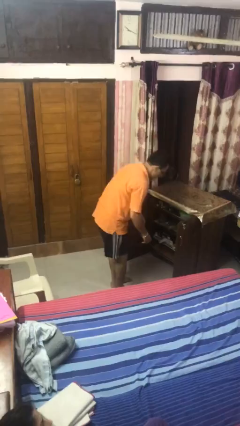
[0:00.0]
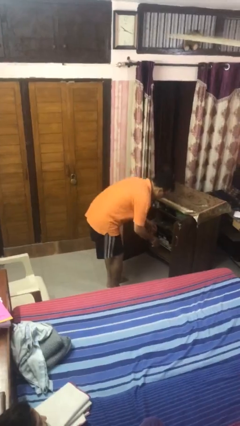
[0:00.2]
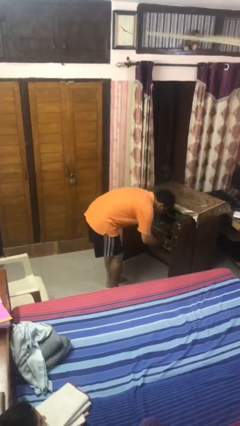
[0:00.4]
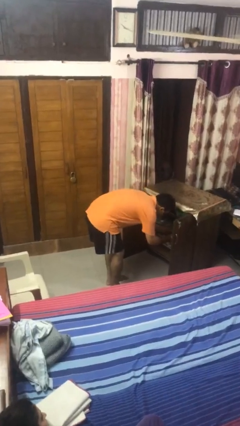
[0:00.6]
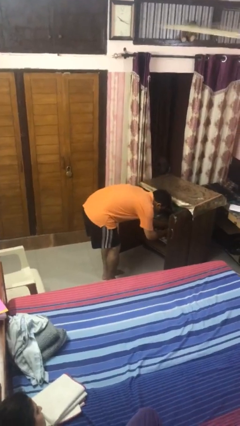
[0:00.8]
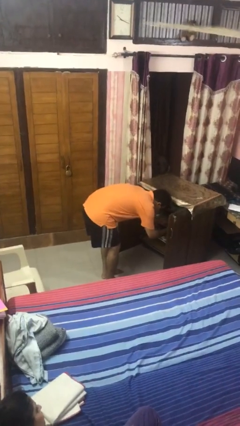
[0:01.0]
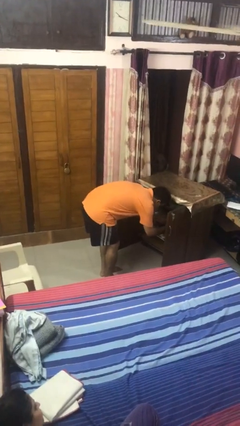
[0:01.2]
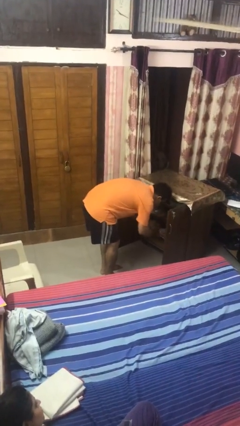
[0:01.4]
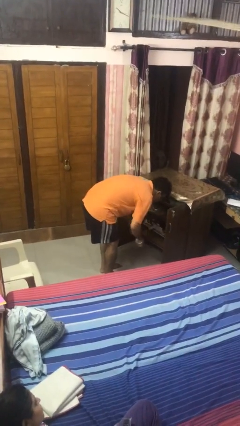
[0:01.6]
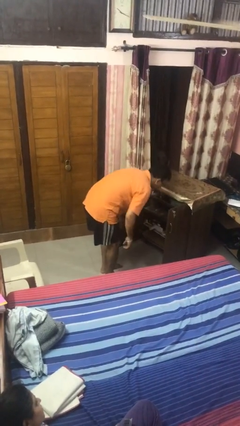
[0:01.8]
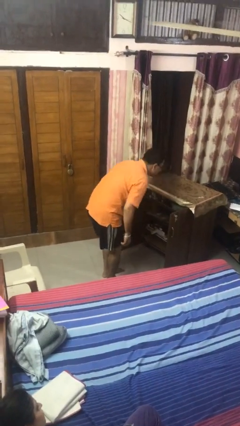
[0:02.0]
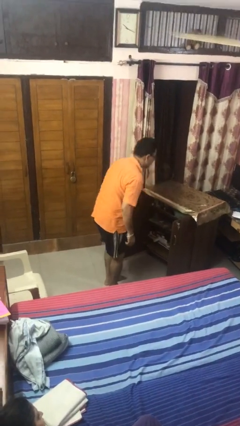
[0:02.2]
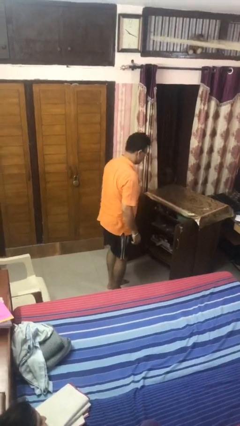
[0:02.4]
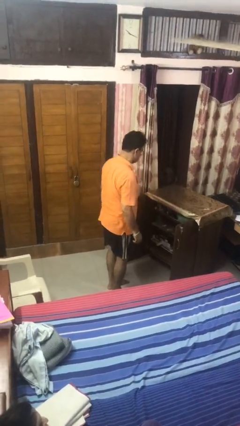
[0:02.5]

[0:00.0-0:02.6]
person searches in cabinet

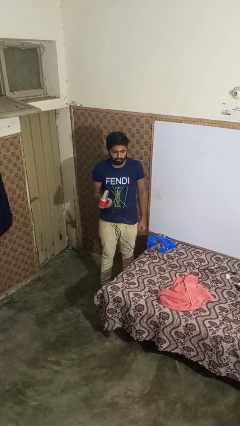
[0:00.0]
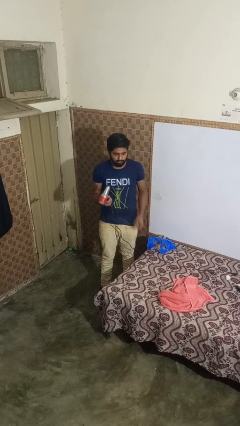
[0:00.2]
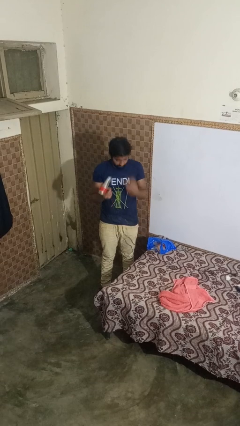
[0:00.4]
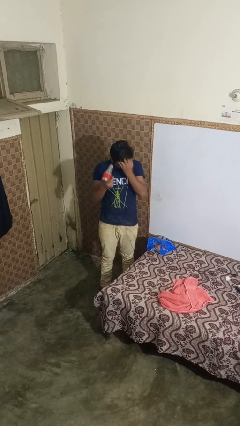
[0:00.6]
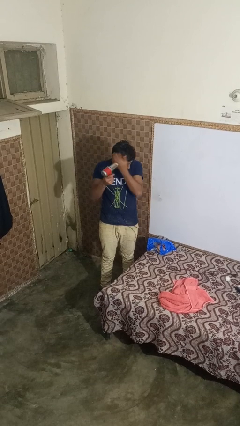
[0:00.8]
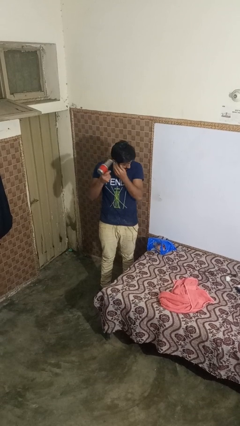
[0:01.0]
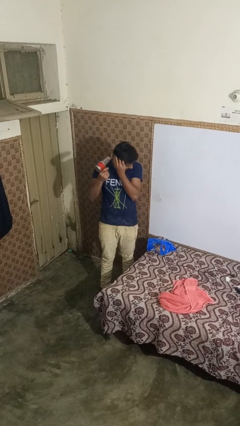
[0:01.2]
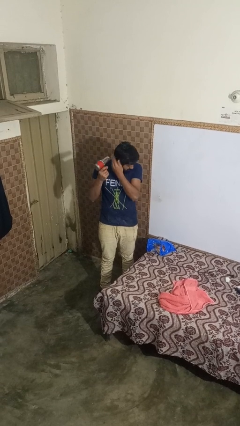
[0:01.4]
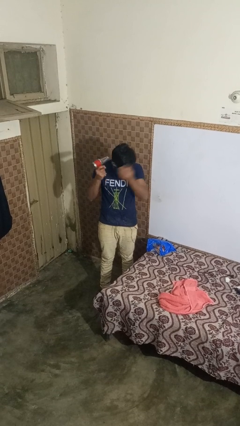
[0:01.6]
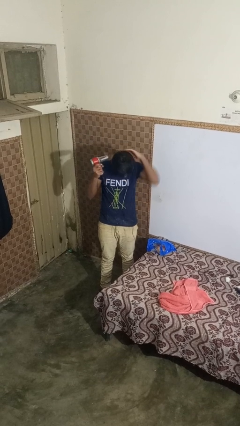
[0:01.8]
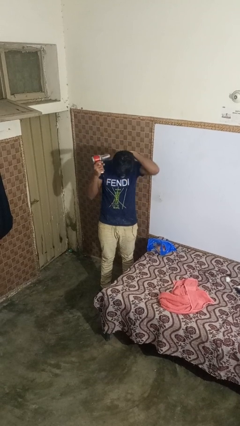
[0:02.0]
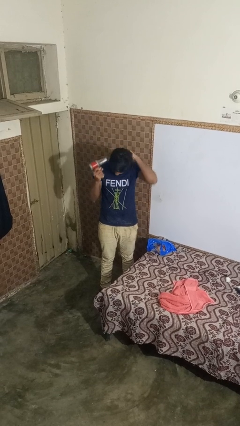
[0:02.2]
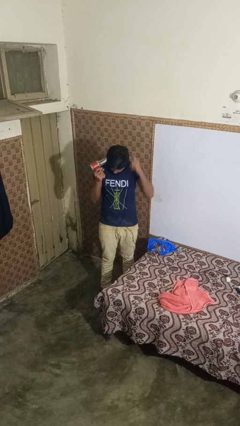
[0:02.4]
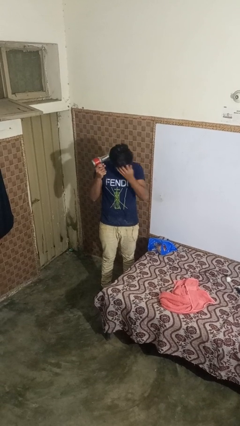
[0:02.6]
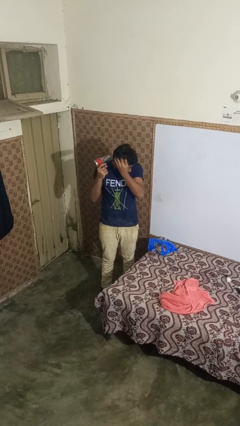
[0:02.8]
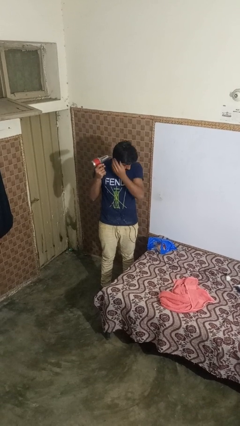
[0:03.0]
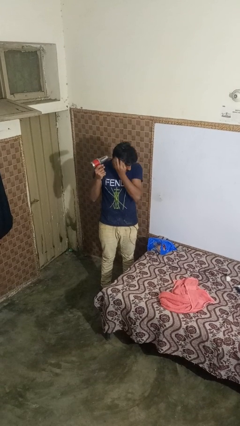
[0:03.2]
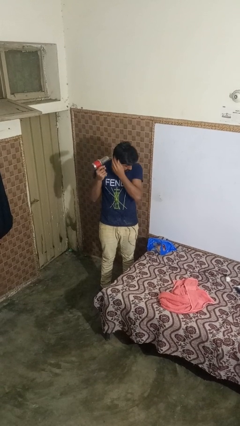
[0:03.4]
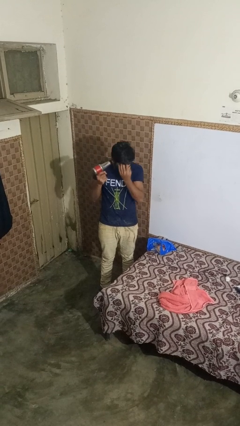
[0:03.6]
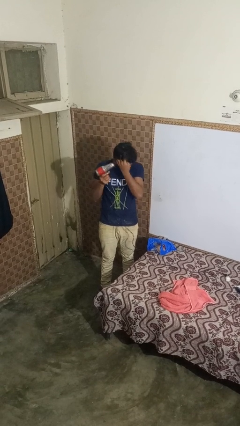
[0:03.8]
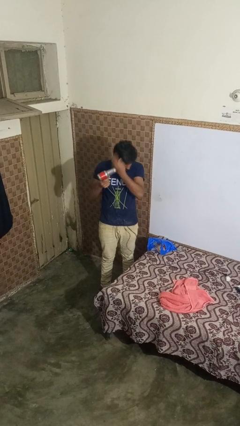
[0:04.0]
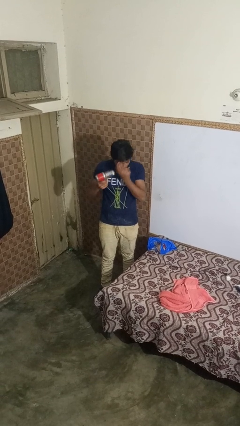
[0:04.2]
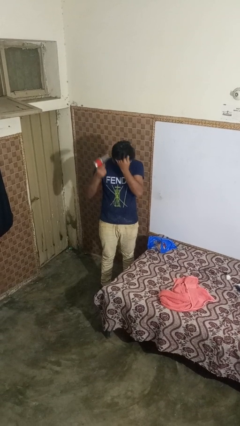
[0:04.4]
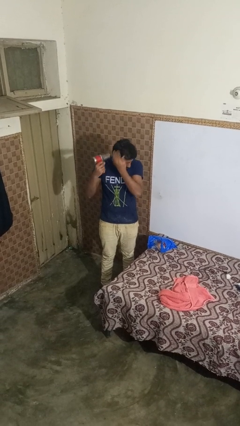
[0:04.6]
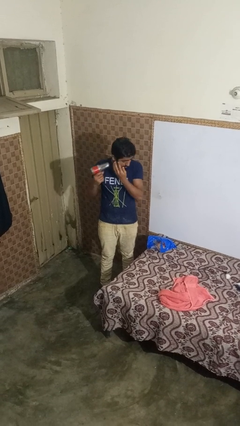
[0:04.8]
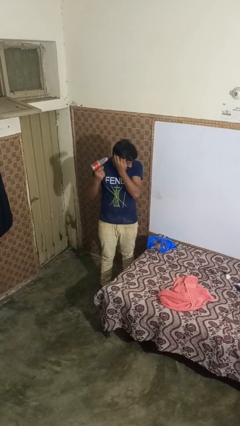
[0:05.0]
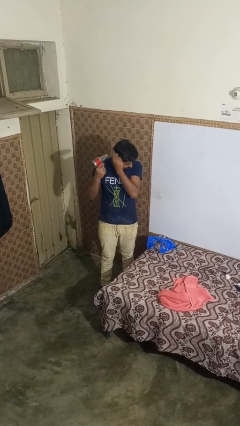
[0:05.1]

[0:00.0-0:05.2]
person dries hair with hairdryer

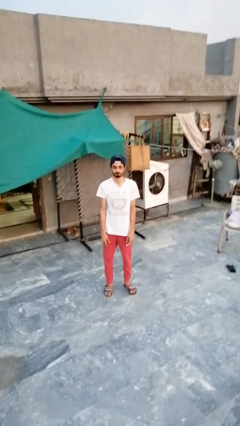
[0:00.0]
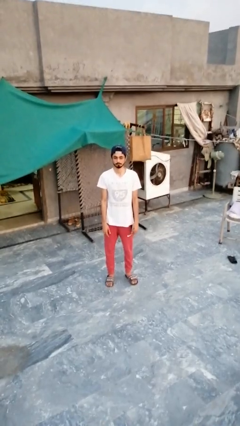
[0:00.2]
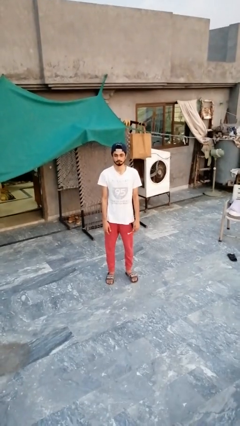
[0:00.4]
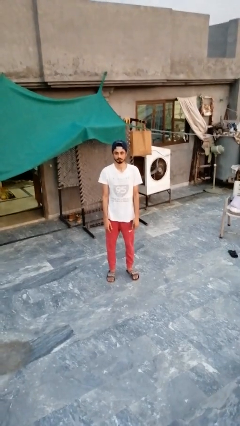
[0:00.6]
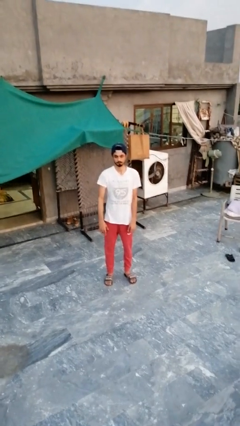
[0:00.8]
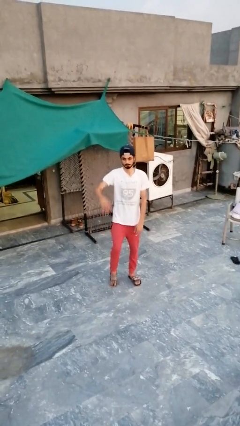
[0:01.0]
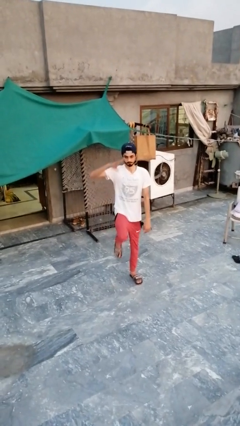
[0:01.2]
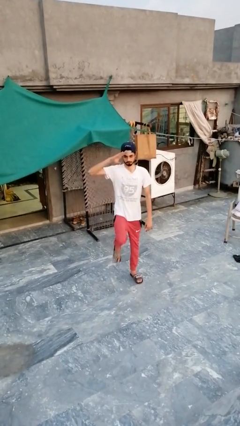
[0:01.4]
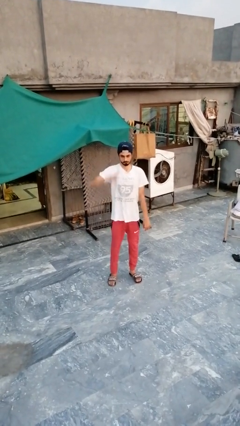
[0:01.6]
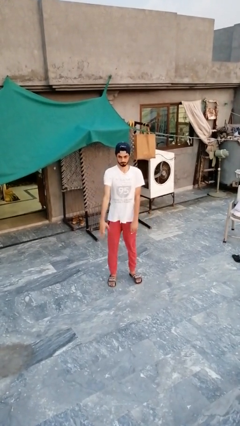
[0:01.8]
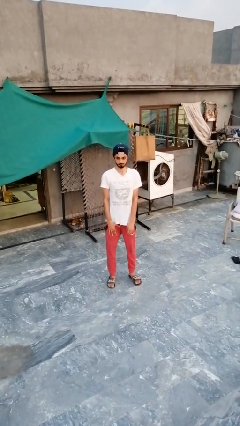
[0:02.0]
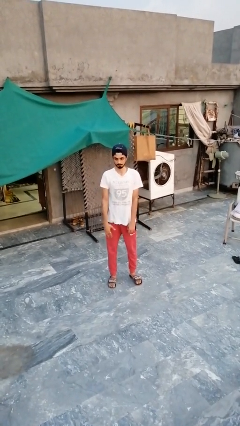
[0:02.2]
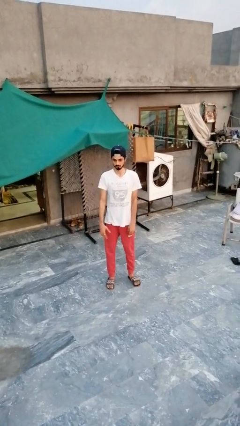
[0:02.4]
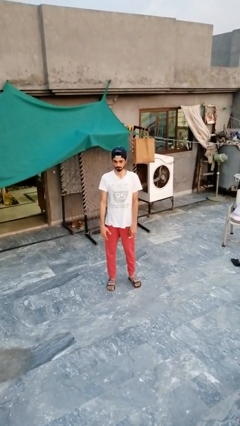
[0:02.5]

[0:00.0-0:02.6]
person salutes

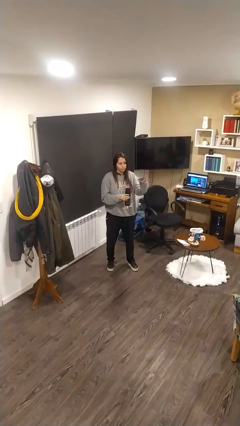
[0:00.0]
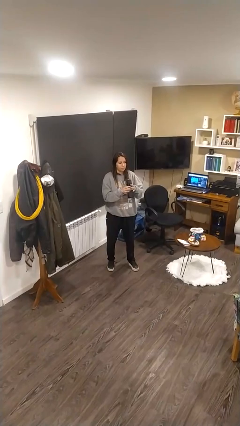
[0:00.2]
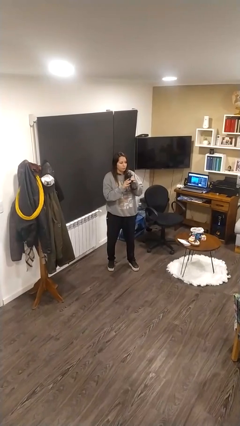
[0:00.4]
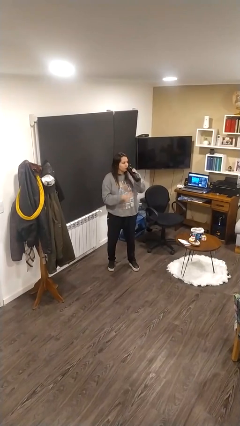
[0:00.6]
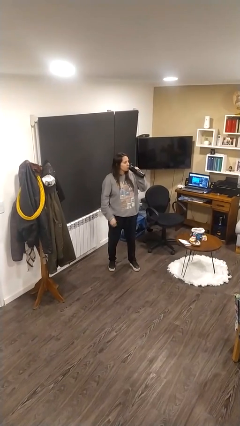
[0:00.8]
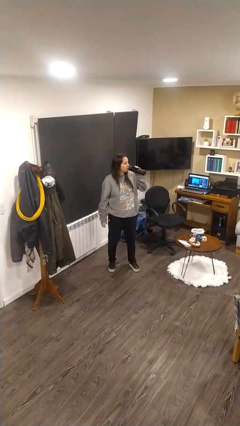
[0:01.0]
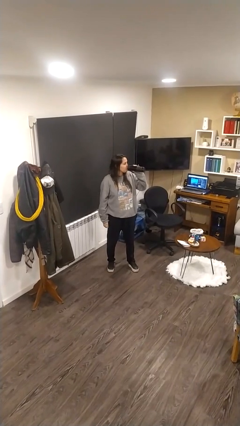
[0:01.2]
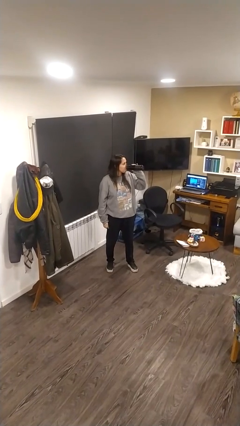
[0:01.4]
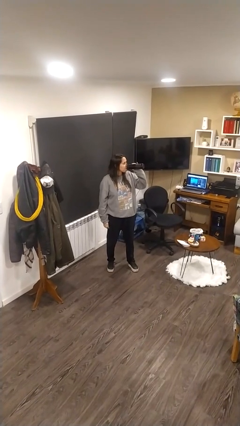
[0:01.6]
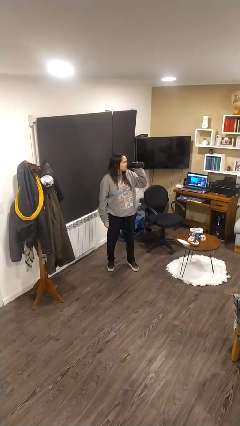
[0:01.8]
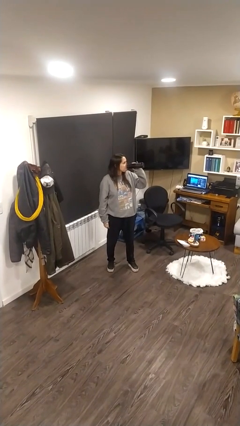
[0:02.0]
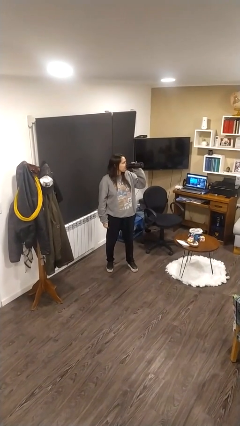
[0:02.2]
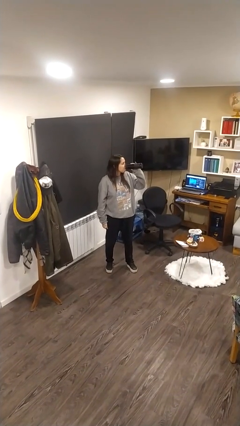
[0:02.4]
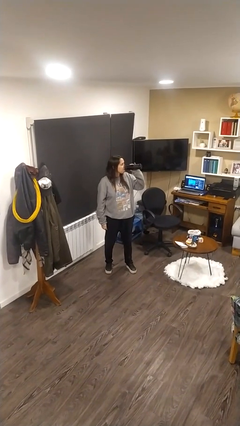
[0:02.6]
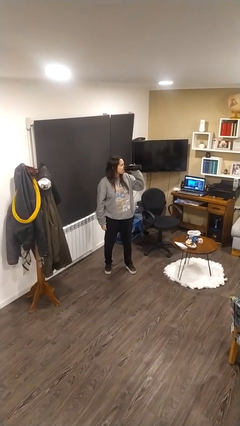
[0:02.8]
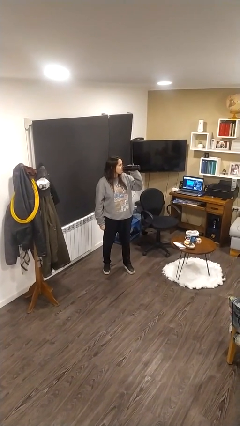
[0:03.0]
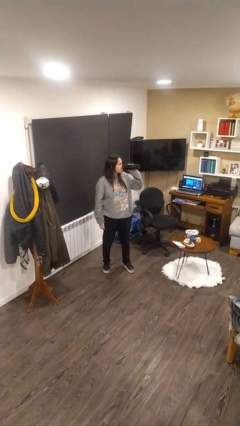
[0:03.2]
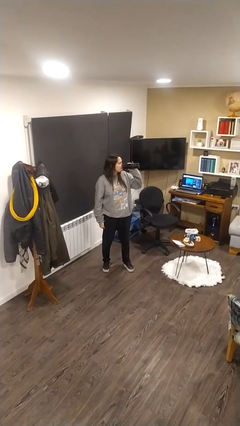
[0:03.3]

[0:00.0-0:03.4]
person drinks from bottle

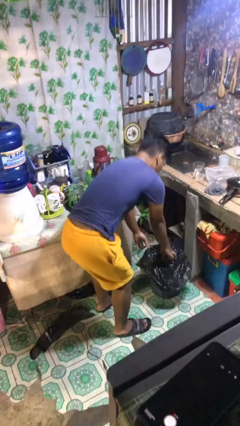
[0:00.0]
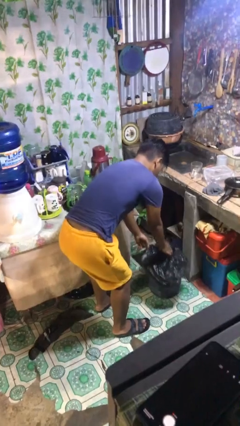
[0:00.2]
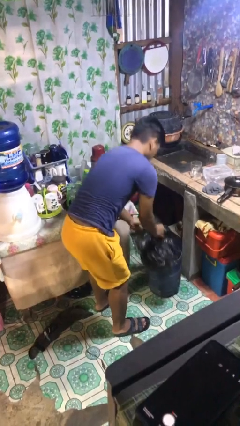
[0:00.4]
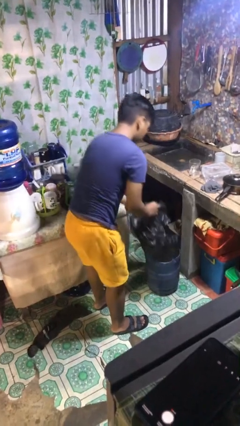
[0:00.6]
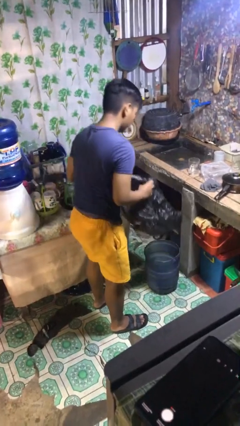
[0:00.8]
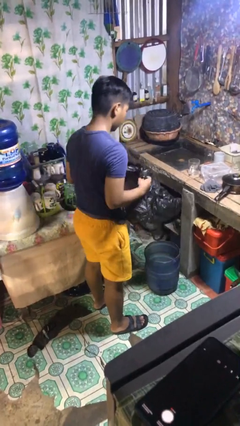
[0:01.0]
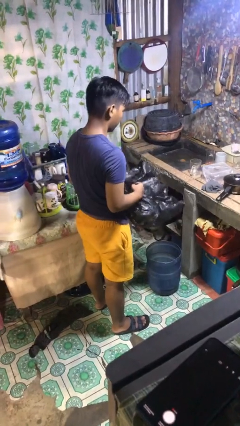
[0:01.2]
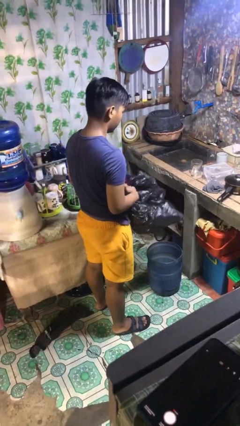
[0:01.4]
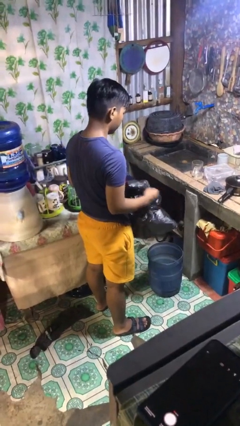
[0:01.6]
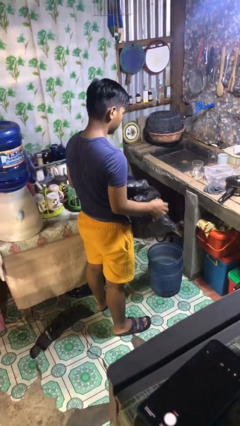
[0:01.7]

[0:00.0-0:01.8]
person removes trashbag from trashcan

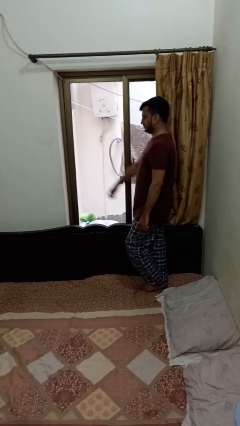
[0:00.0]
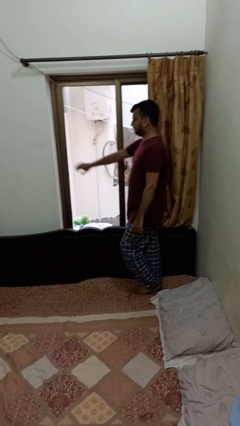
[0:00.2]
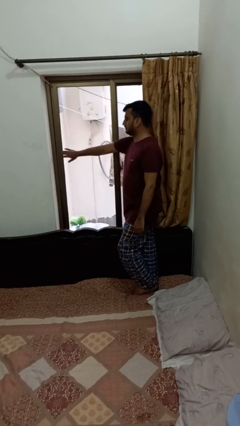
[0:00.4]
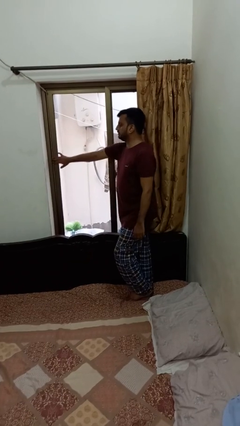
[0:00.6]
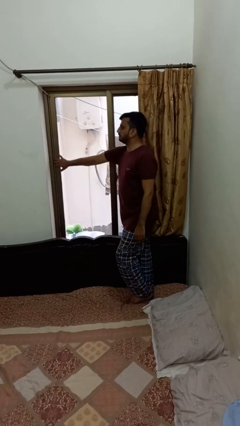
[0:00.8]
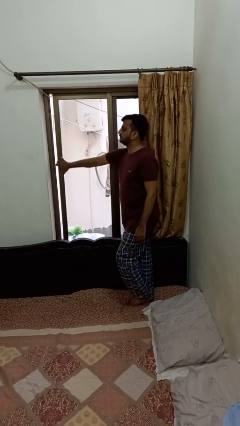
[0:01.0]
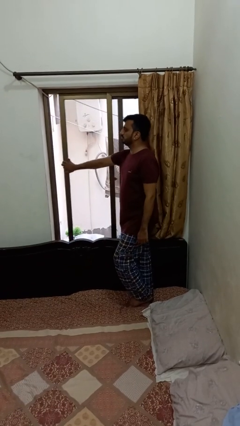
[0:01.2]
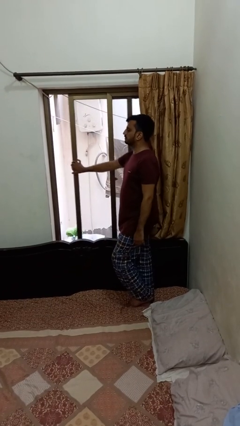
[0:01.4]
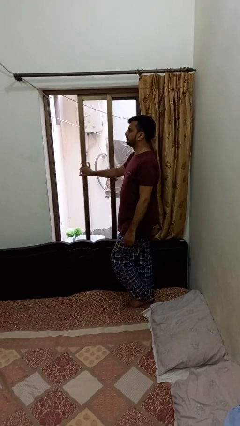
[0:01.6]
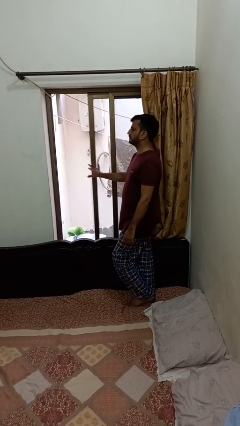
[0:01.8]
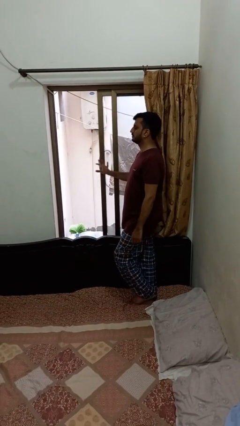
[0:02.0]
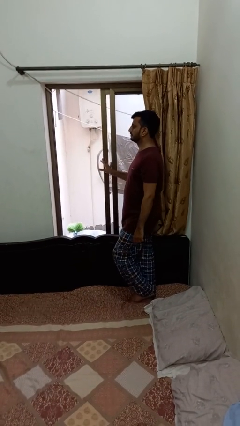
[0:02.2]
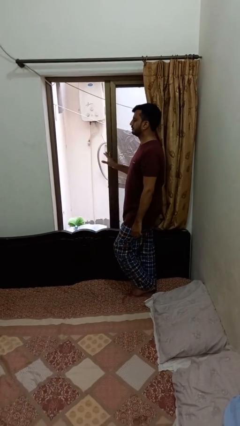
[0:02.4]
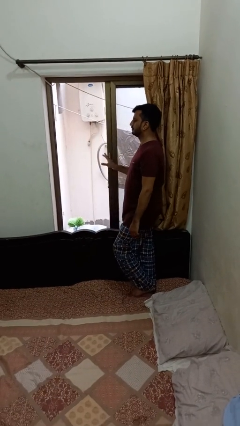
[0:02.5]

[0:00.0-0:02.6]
person opens home window
